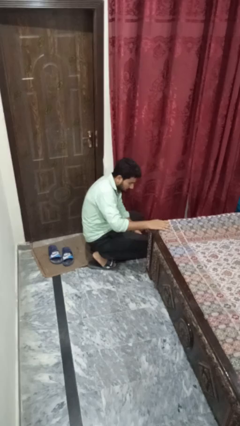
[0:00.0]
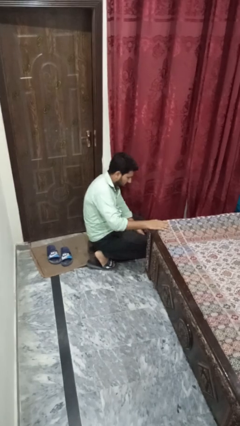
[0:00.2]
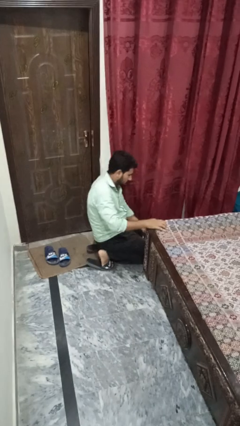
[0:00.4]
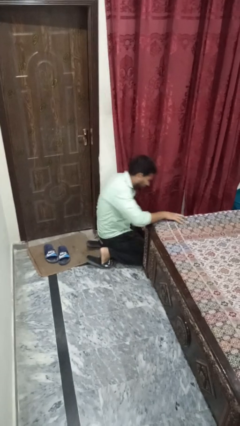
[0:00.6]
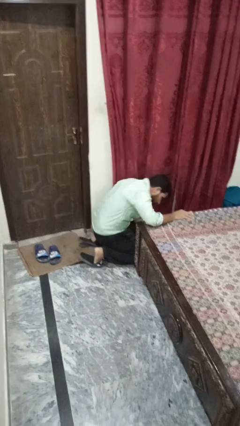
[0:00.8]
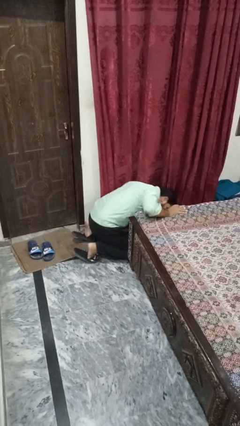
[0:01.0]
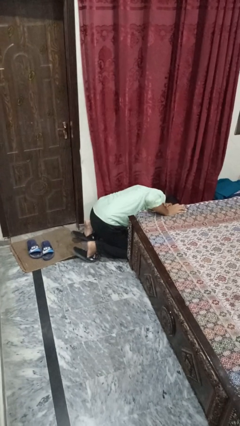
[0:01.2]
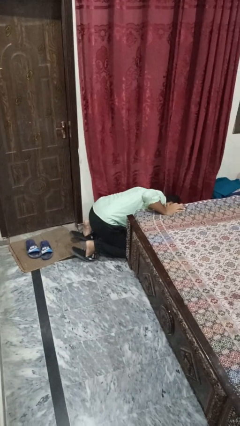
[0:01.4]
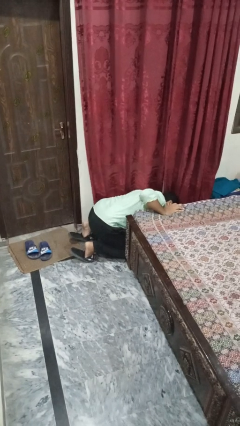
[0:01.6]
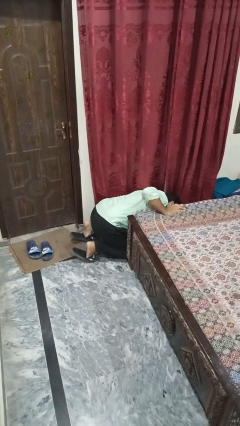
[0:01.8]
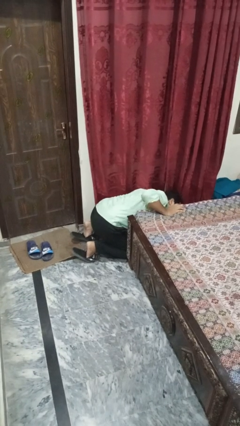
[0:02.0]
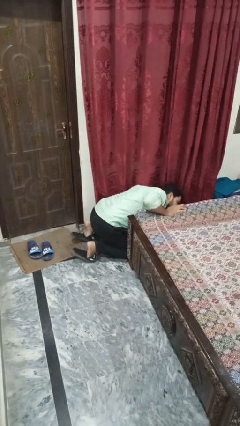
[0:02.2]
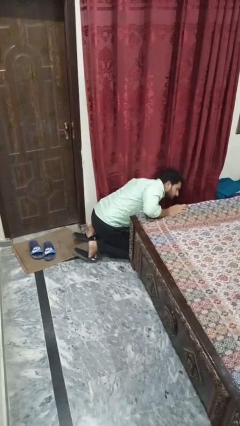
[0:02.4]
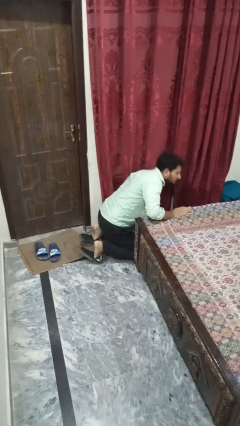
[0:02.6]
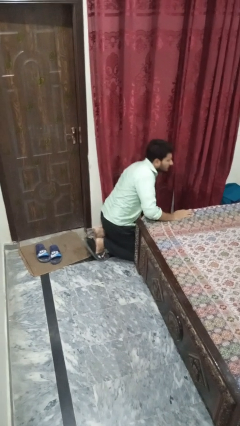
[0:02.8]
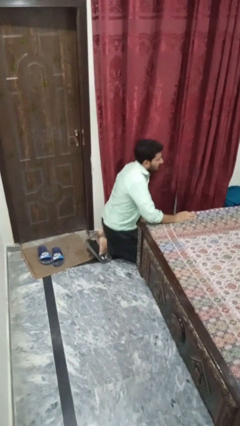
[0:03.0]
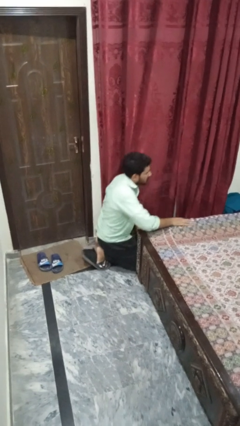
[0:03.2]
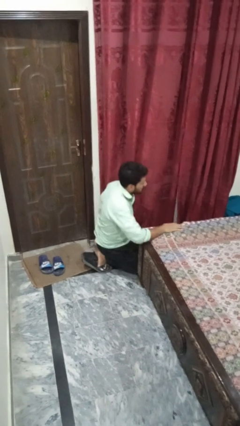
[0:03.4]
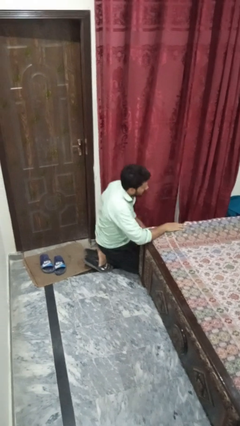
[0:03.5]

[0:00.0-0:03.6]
person searches under bed

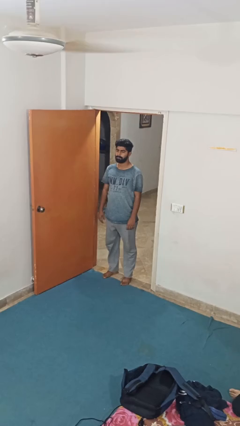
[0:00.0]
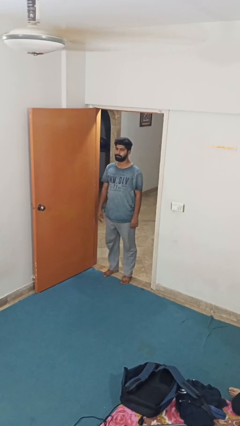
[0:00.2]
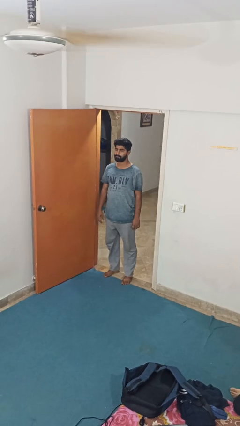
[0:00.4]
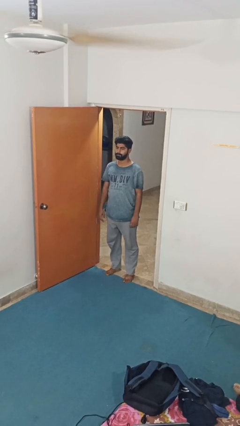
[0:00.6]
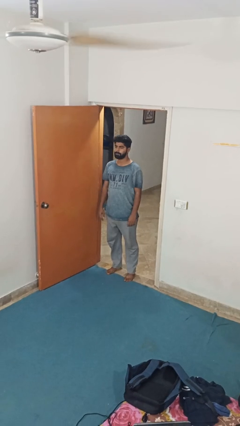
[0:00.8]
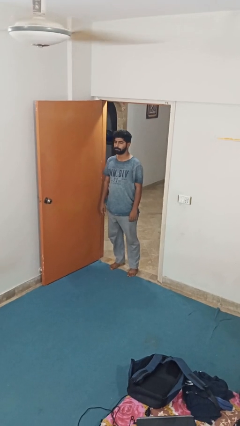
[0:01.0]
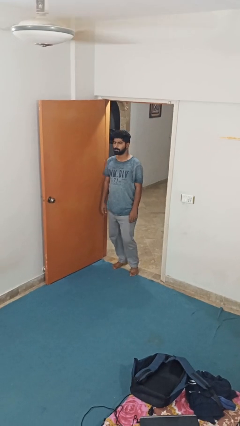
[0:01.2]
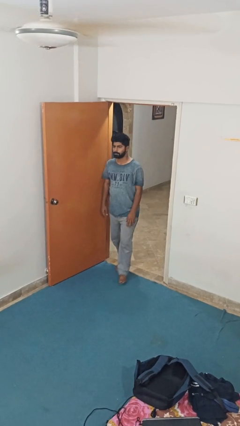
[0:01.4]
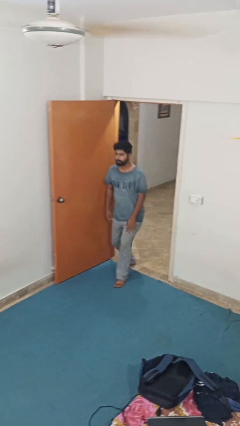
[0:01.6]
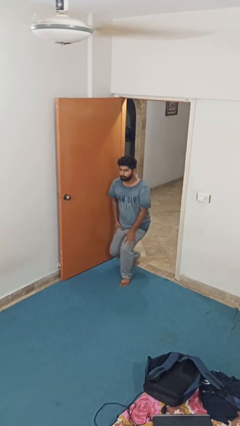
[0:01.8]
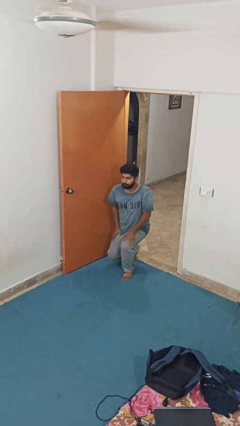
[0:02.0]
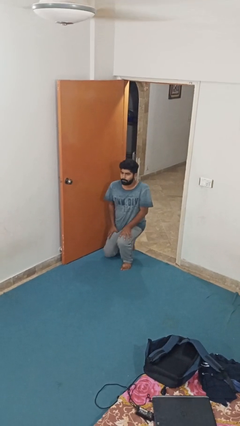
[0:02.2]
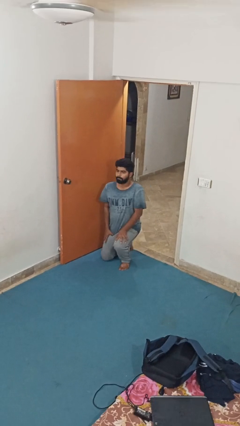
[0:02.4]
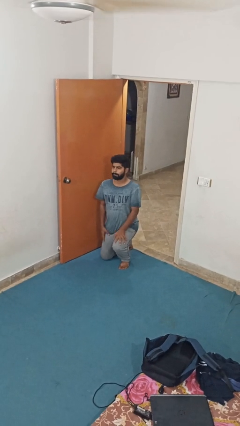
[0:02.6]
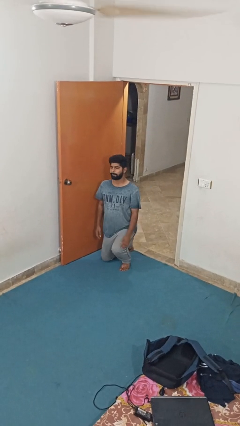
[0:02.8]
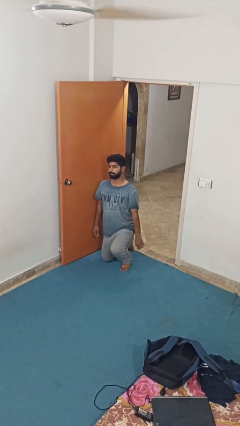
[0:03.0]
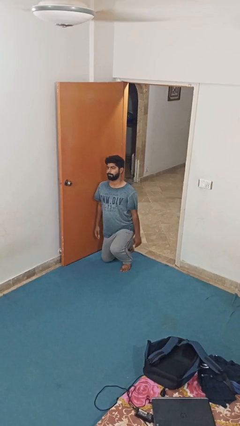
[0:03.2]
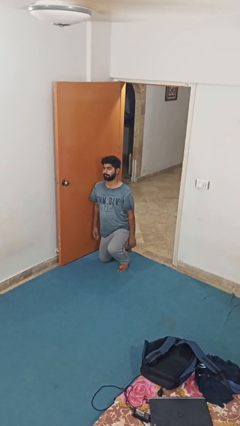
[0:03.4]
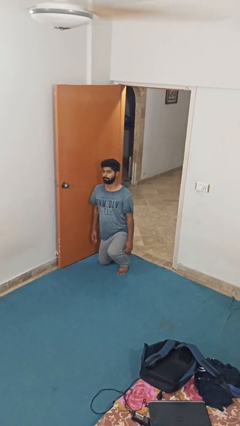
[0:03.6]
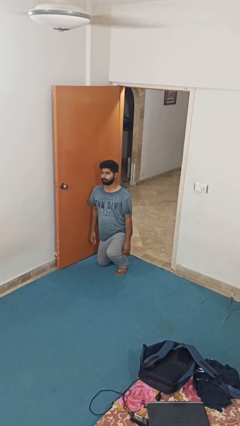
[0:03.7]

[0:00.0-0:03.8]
person kneels

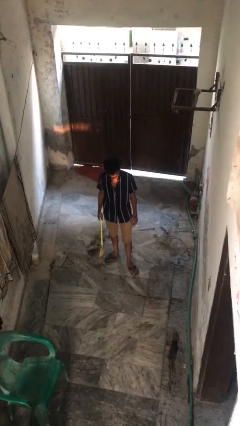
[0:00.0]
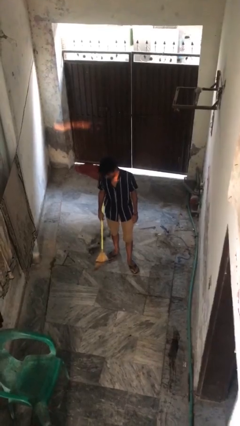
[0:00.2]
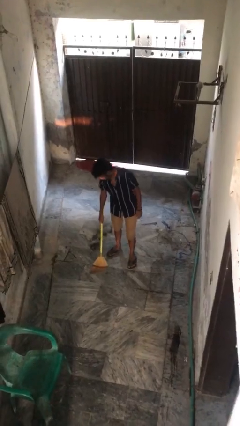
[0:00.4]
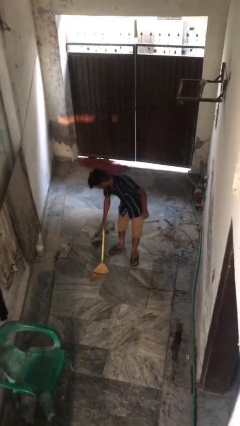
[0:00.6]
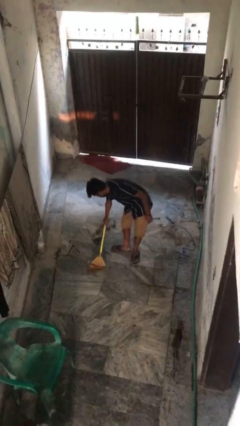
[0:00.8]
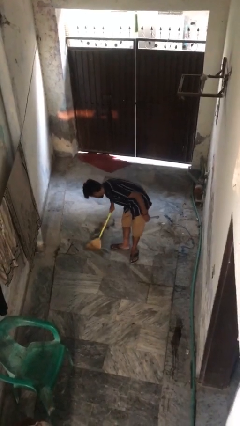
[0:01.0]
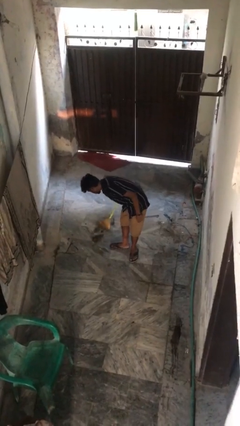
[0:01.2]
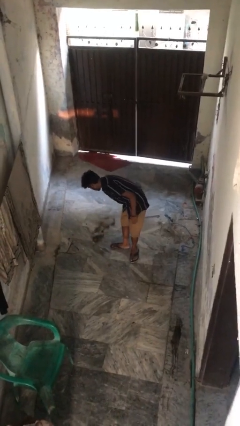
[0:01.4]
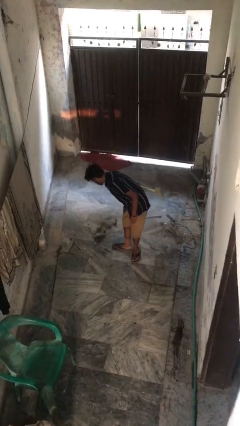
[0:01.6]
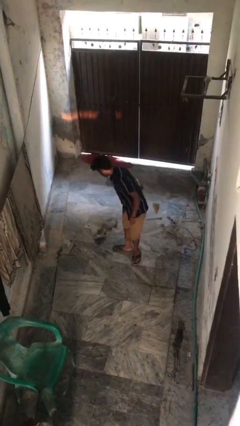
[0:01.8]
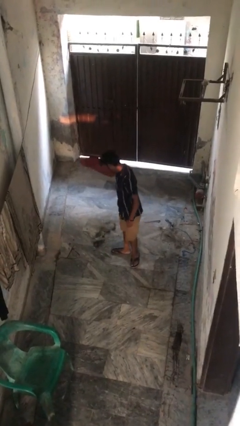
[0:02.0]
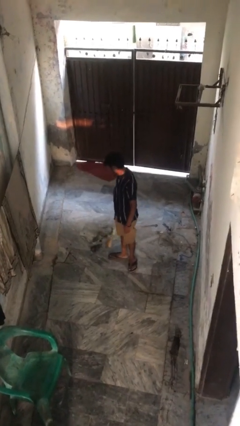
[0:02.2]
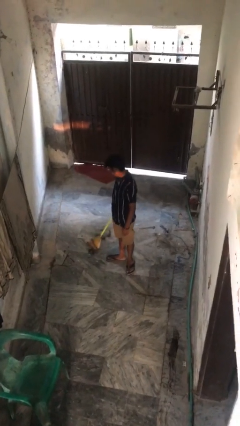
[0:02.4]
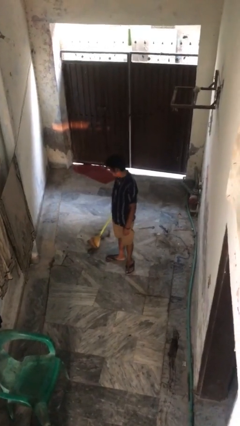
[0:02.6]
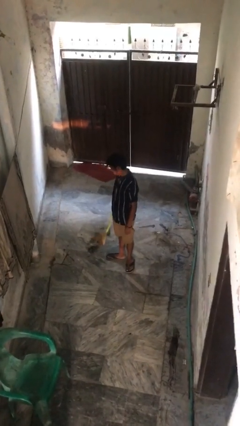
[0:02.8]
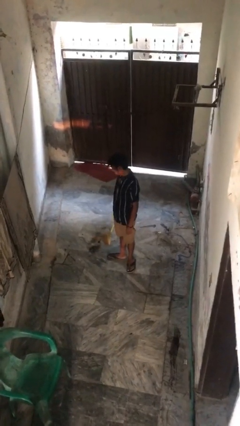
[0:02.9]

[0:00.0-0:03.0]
person sweeps floor

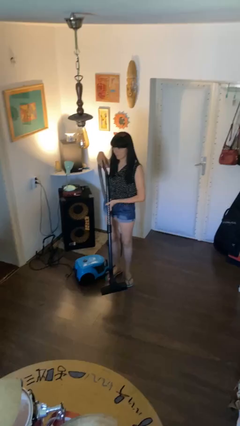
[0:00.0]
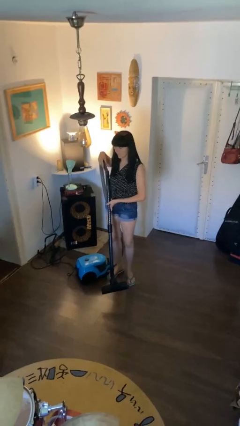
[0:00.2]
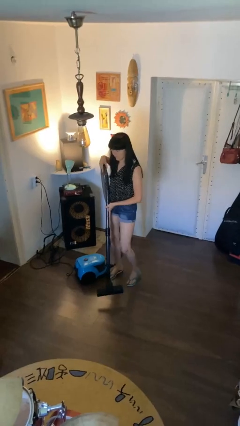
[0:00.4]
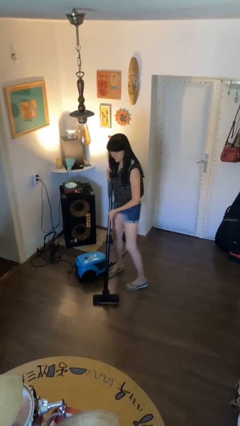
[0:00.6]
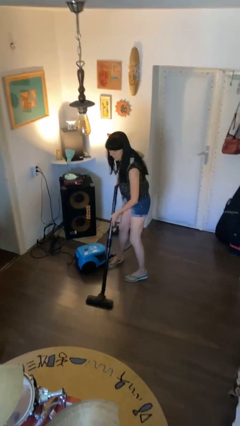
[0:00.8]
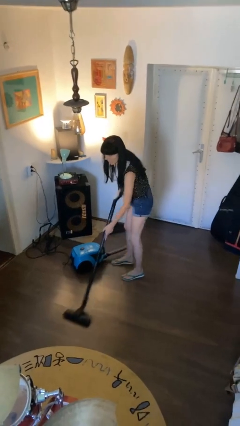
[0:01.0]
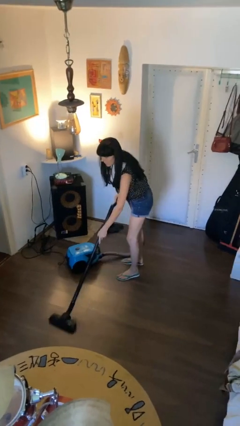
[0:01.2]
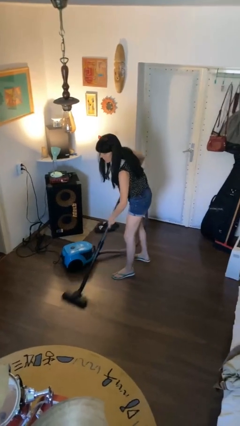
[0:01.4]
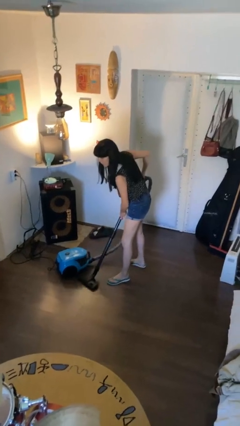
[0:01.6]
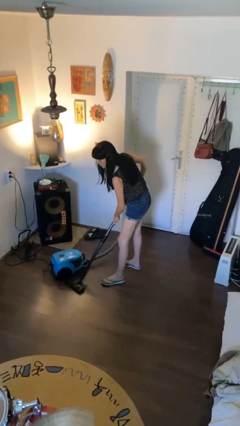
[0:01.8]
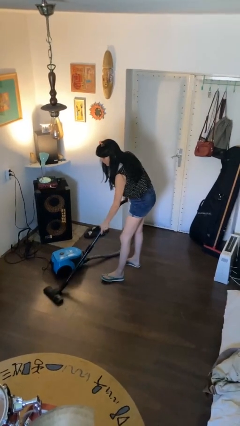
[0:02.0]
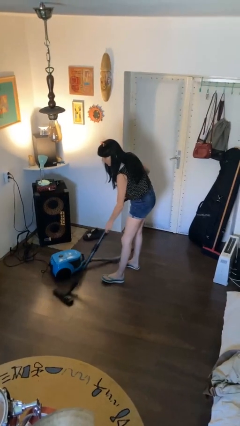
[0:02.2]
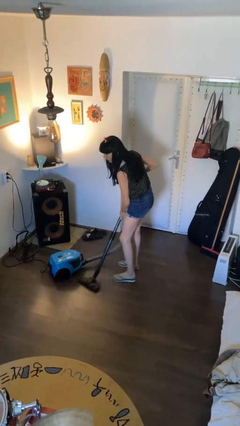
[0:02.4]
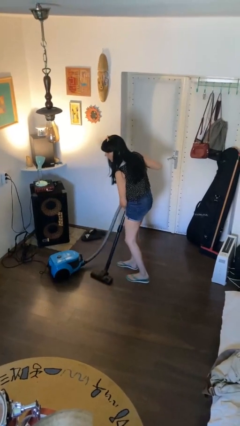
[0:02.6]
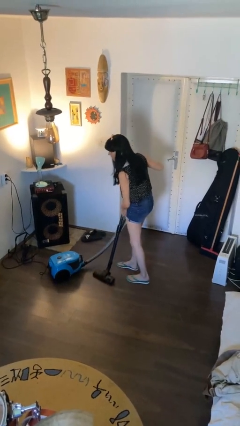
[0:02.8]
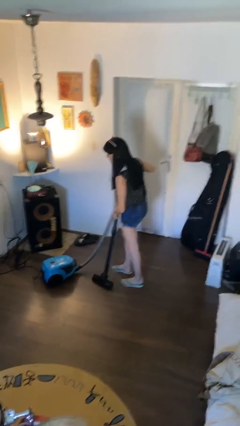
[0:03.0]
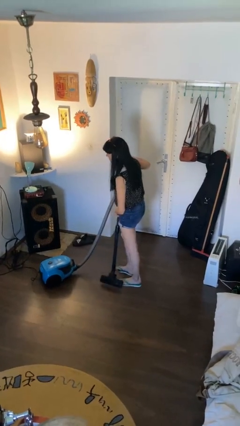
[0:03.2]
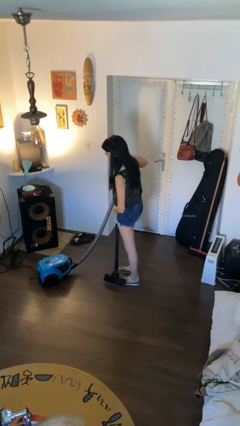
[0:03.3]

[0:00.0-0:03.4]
person vacuums carpet

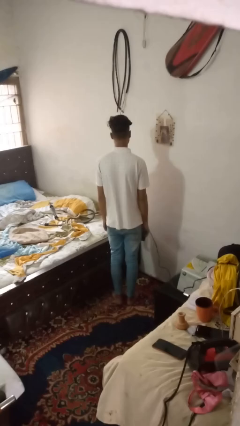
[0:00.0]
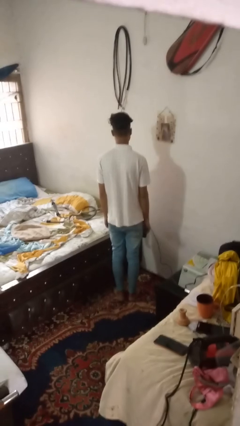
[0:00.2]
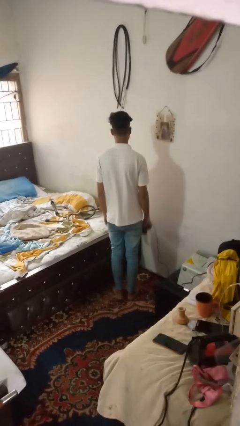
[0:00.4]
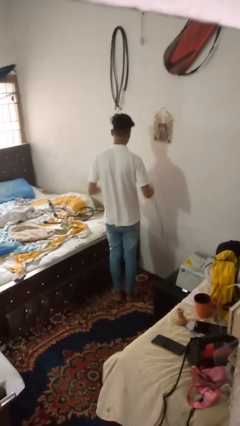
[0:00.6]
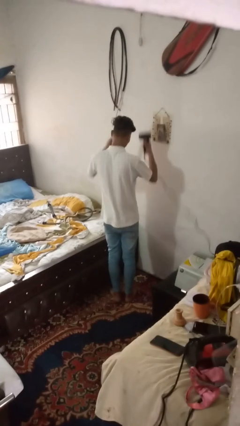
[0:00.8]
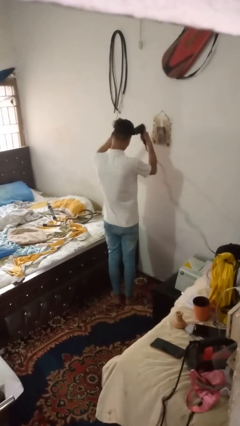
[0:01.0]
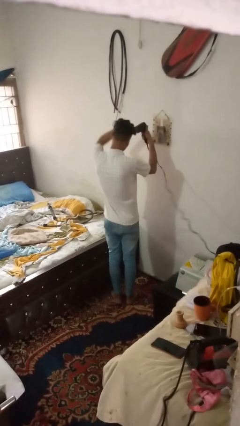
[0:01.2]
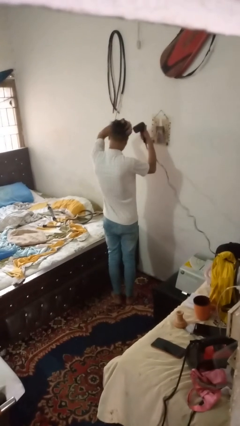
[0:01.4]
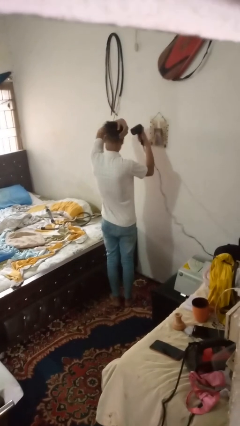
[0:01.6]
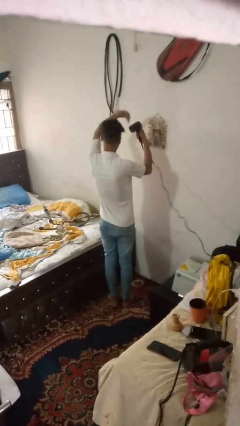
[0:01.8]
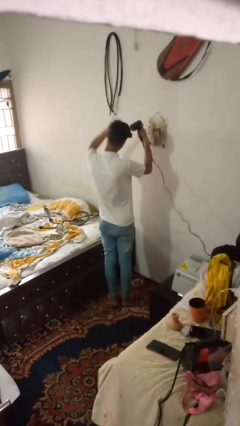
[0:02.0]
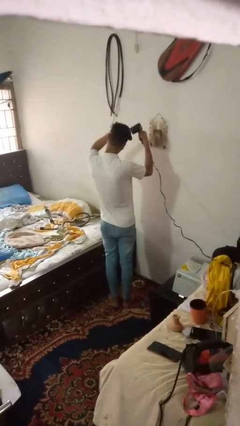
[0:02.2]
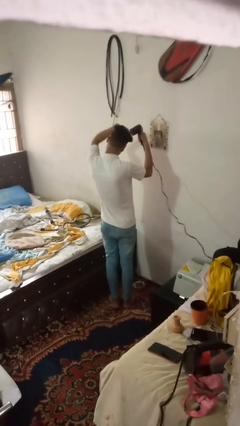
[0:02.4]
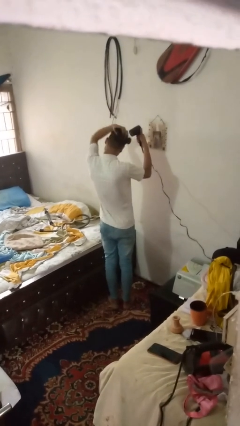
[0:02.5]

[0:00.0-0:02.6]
person dries hair with hairdryer

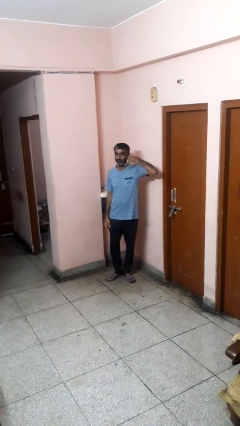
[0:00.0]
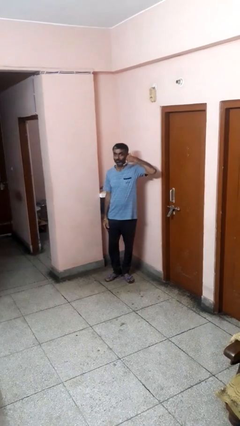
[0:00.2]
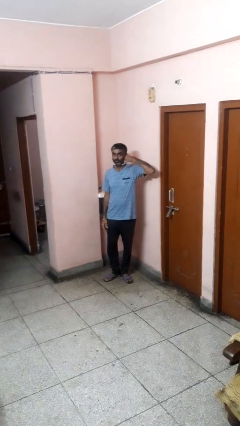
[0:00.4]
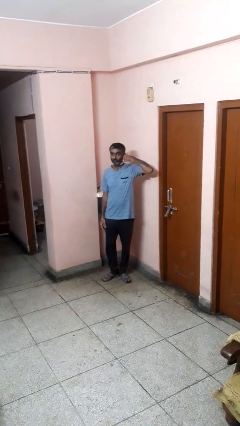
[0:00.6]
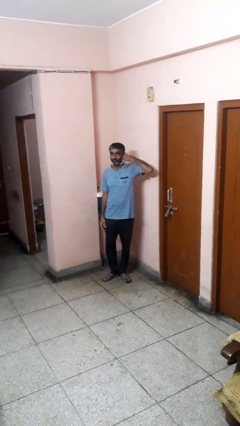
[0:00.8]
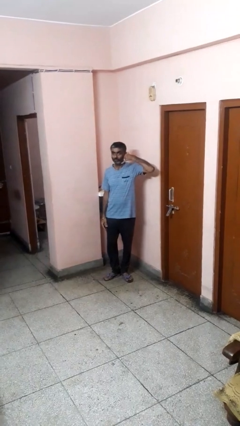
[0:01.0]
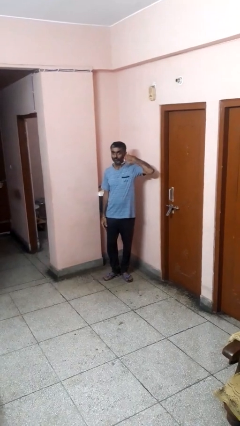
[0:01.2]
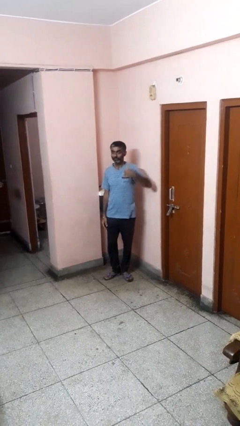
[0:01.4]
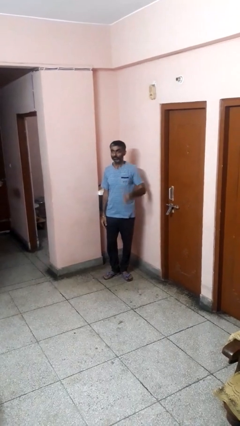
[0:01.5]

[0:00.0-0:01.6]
person gestures call me
